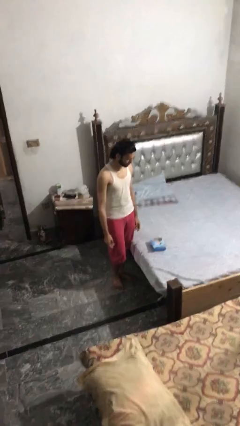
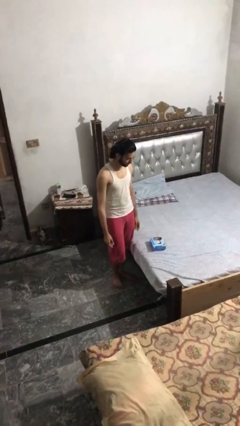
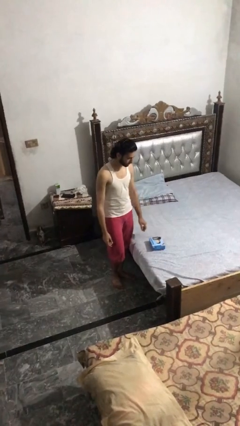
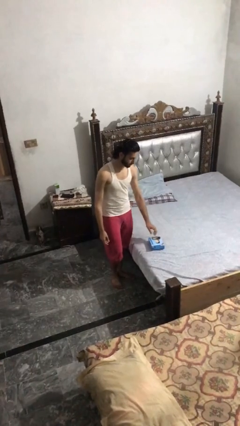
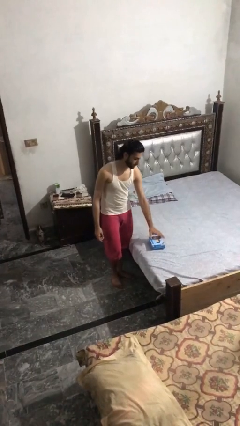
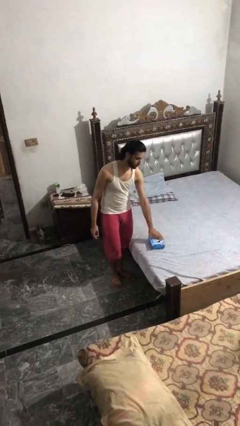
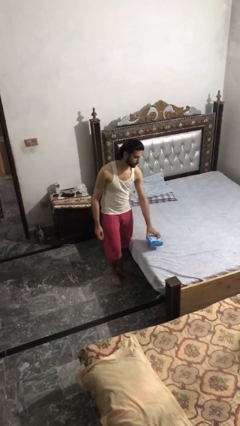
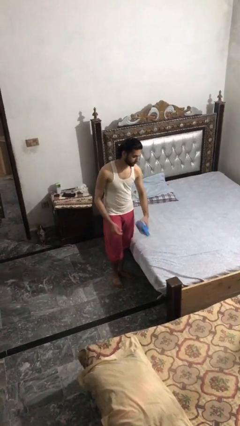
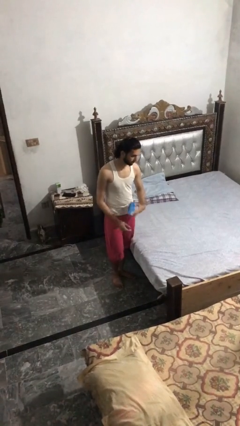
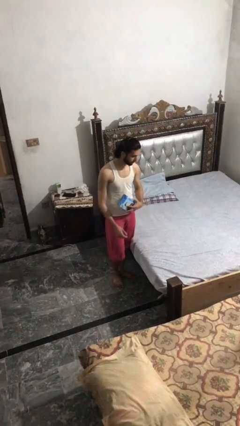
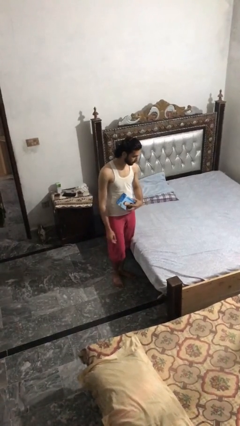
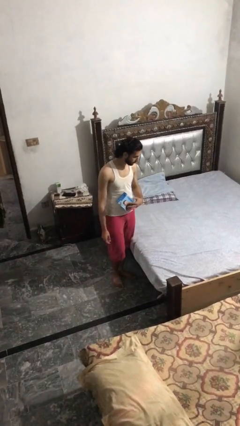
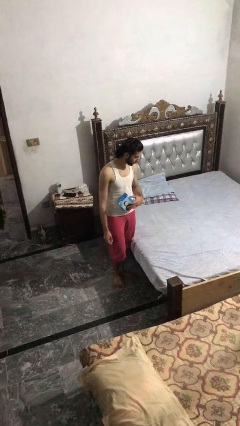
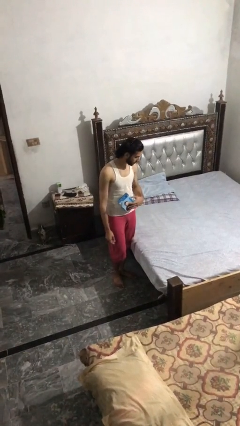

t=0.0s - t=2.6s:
person picks up object from bed

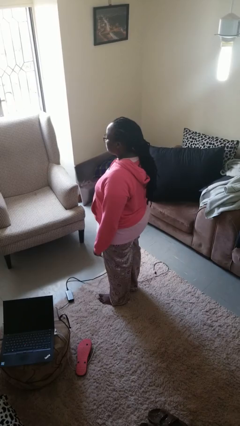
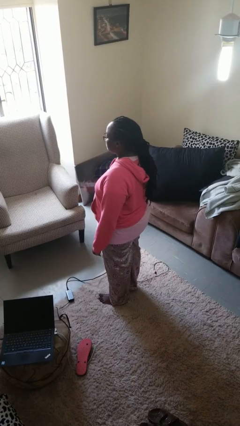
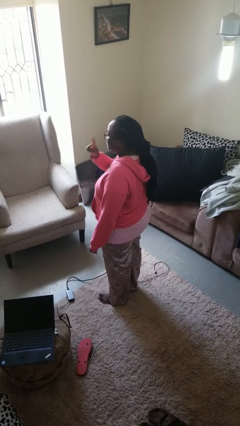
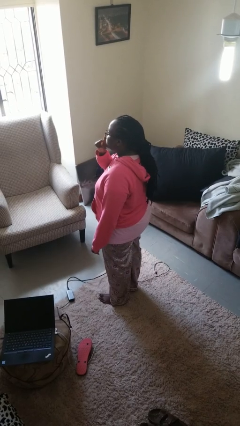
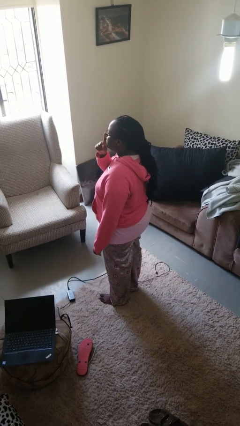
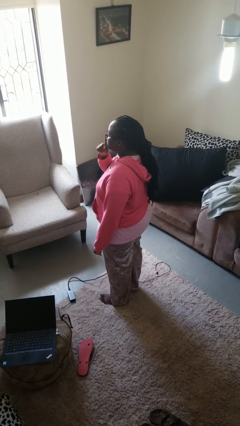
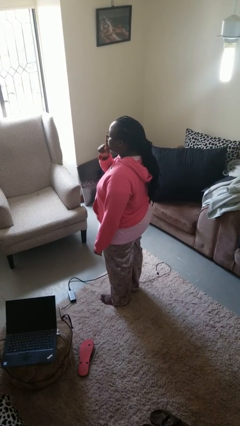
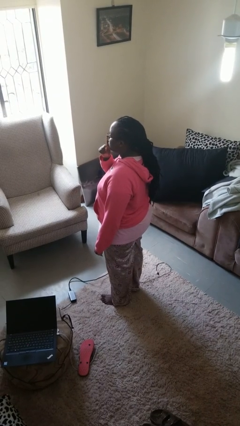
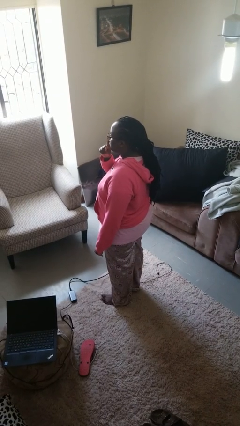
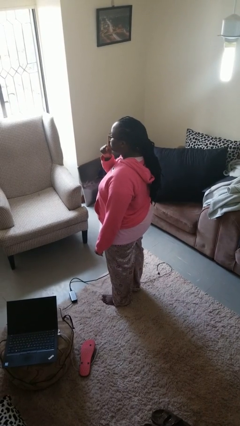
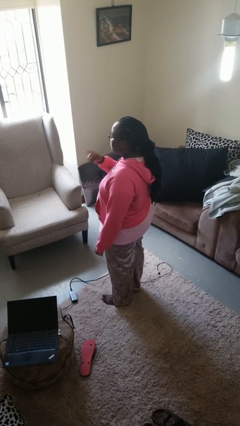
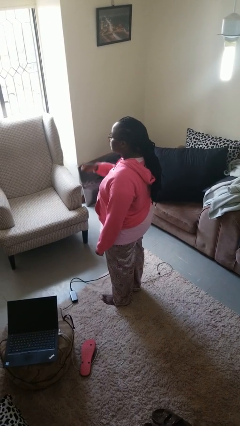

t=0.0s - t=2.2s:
person gestures be quiet

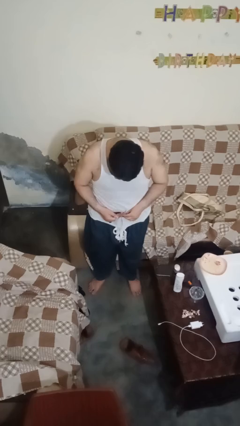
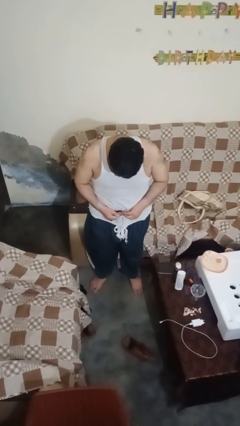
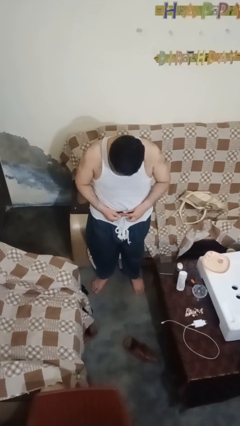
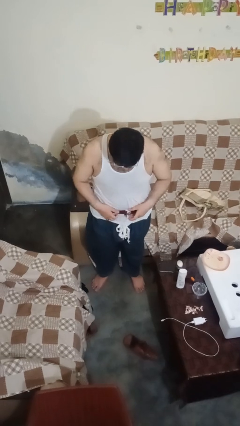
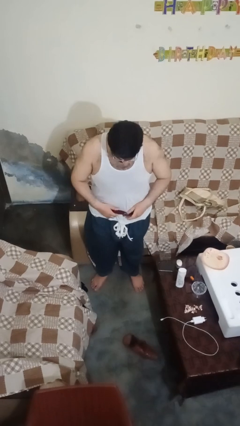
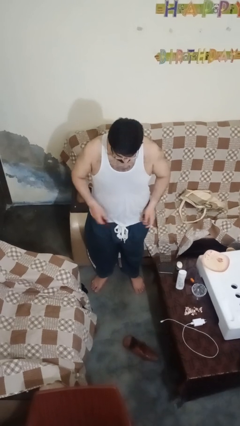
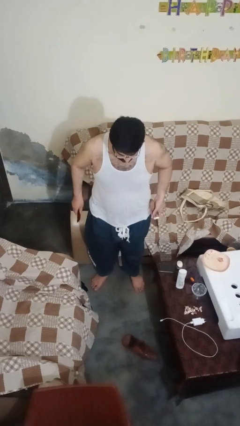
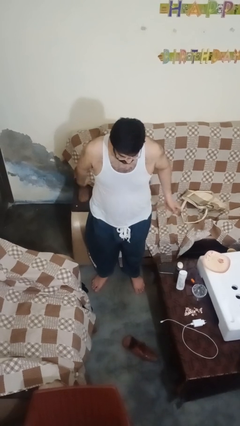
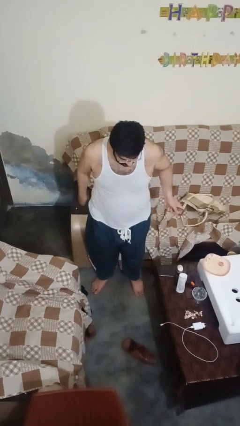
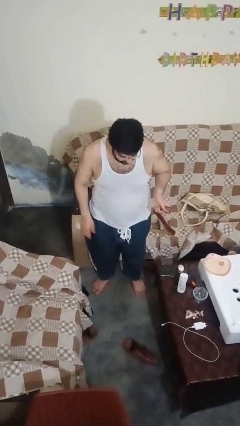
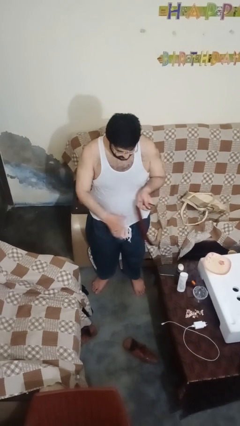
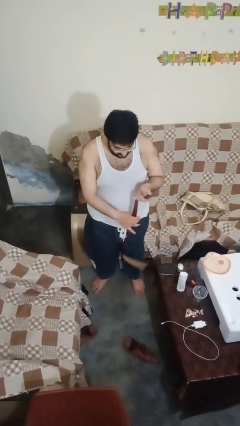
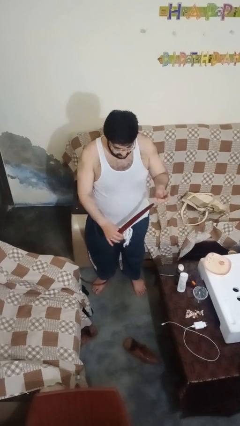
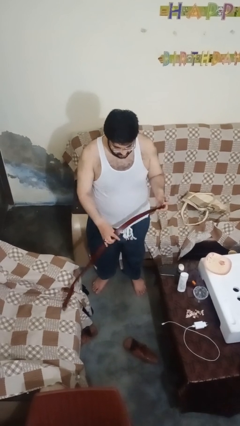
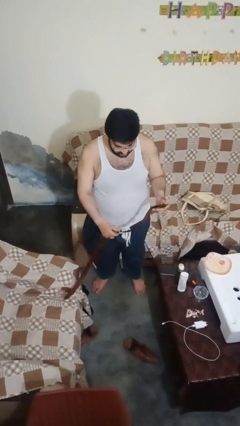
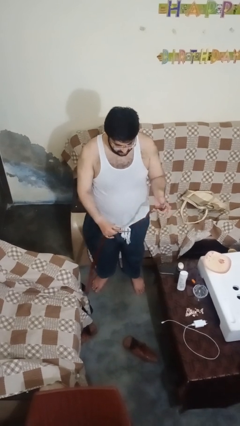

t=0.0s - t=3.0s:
person takes off belt

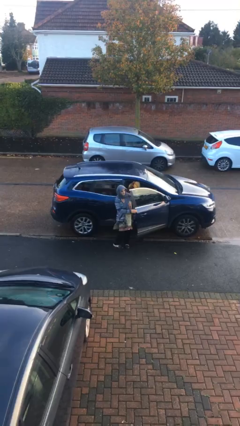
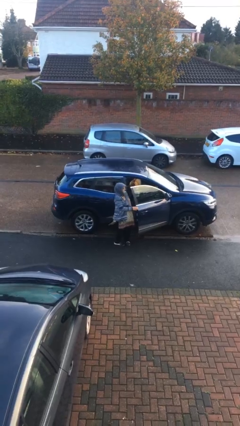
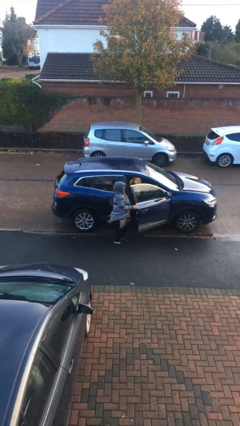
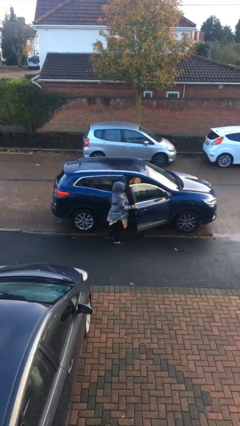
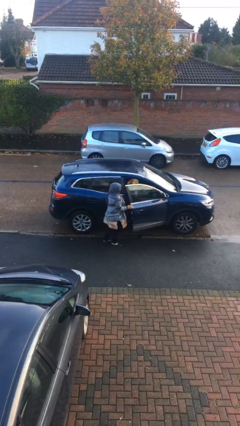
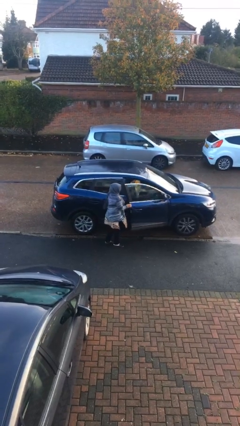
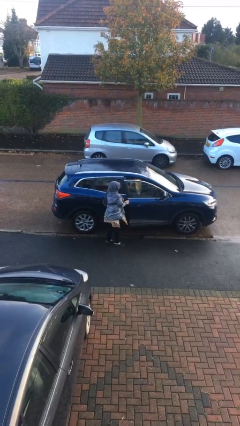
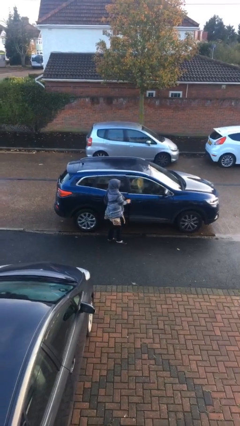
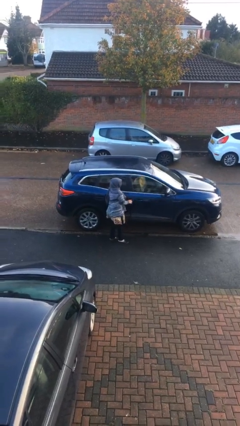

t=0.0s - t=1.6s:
person closes car door

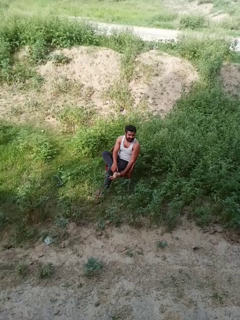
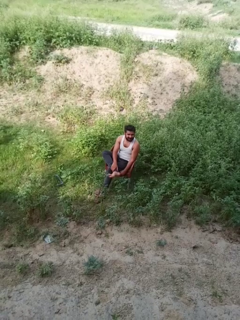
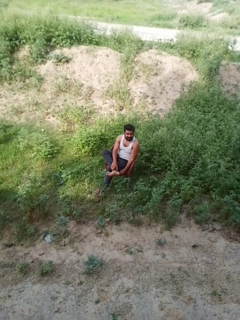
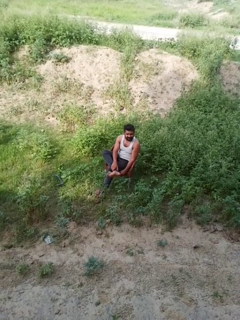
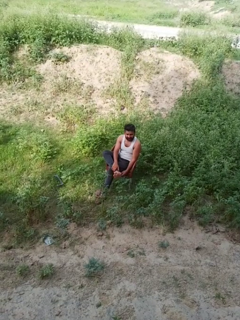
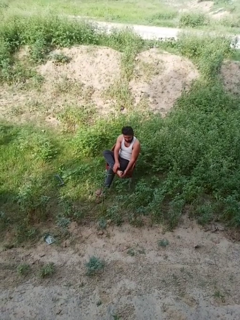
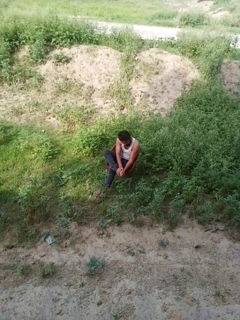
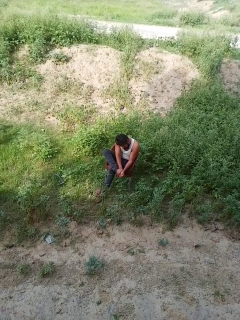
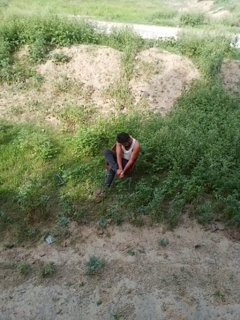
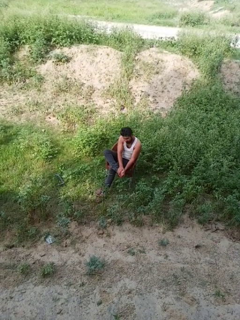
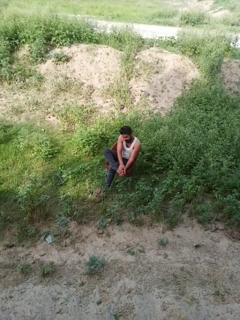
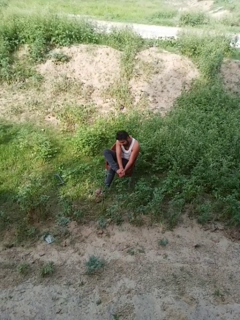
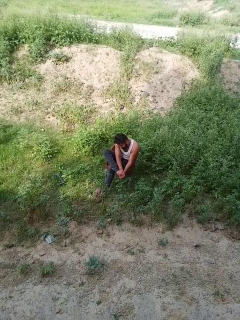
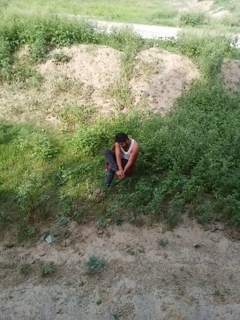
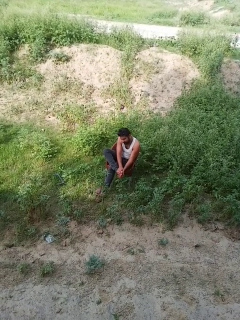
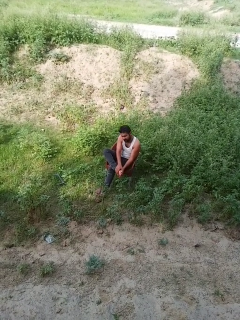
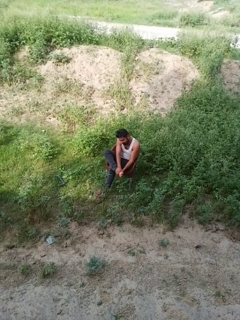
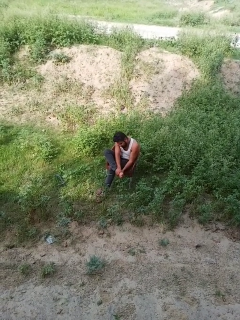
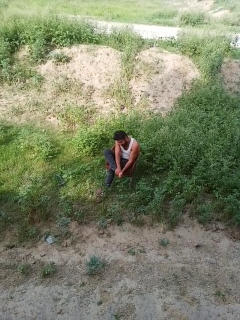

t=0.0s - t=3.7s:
person stubs toe

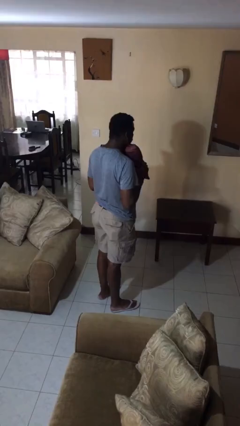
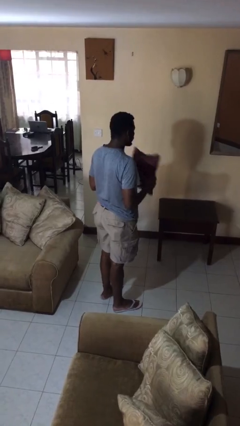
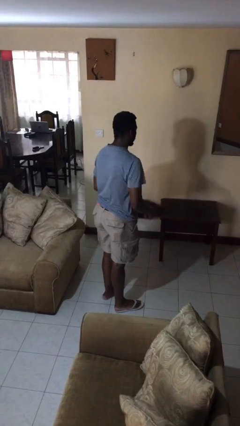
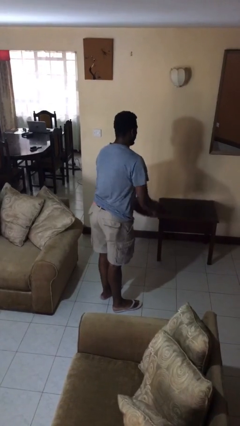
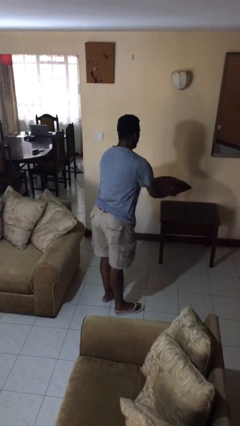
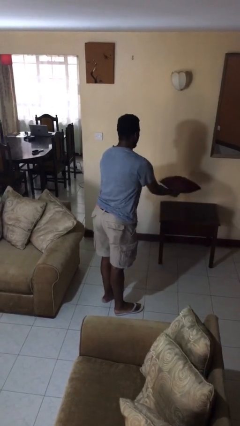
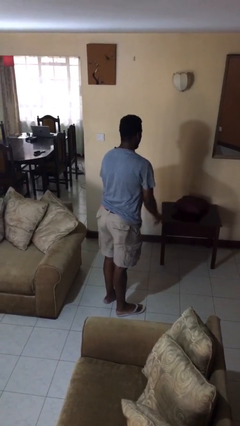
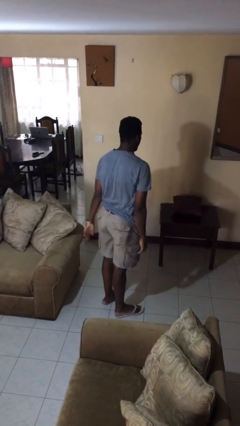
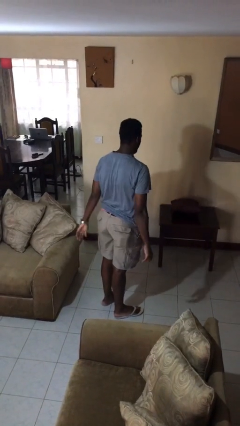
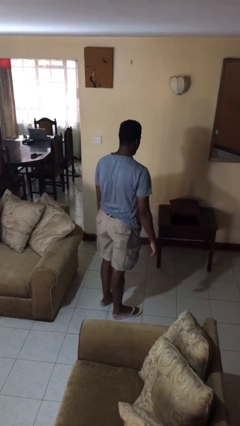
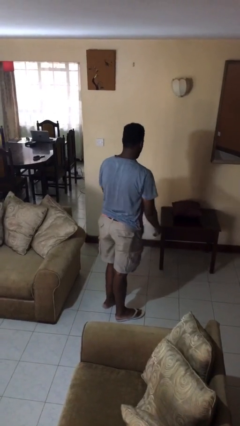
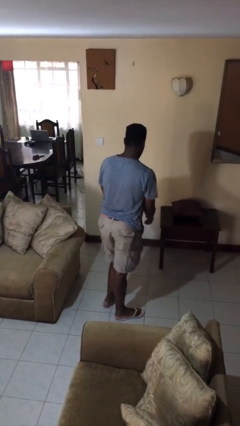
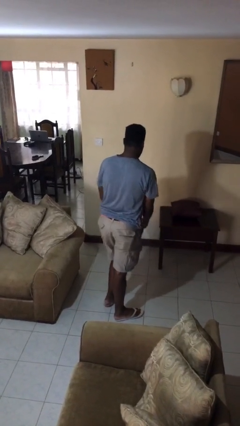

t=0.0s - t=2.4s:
person throws object on table

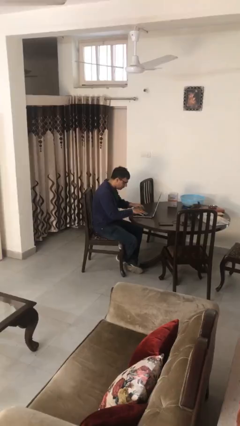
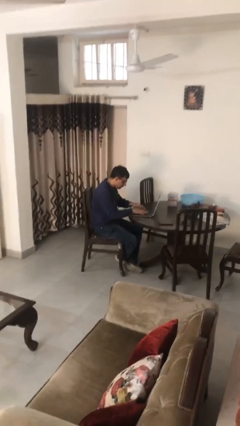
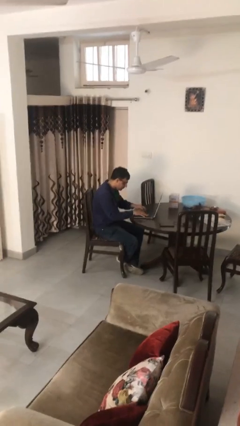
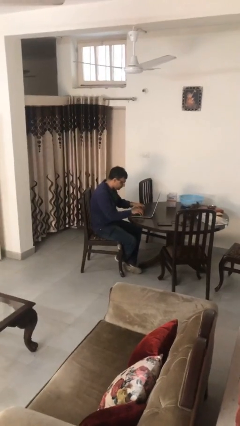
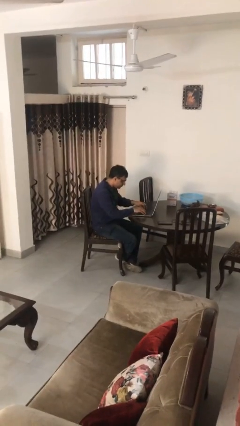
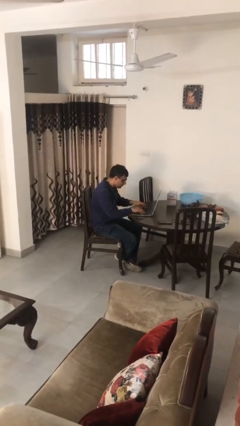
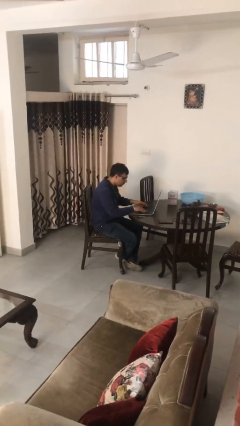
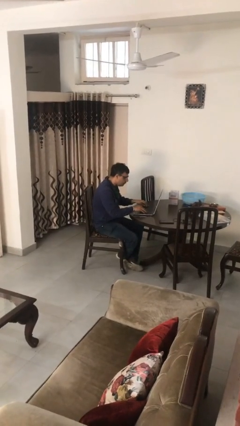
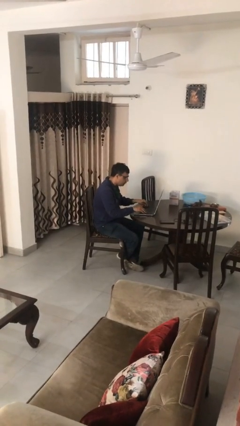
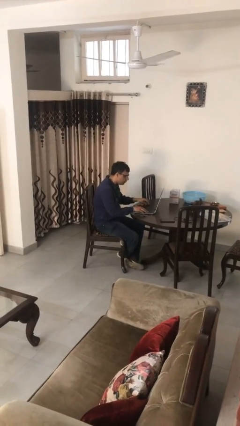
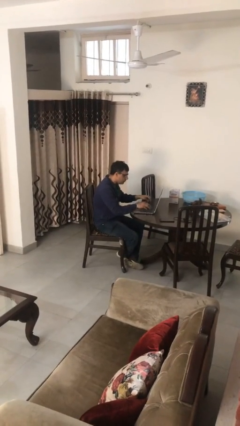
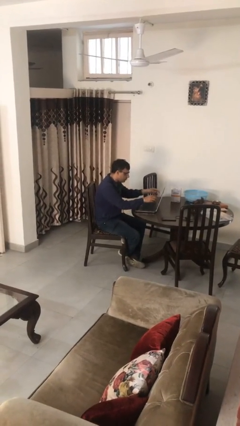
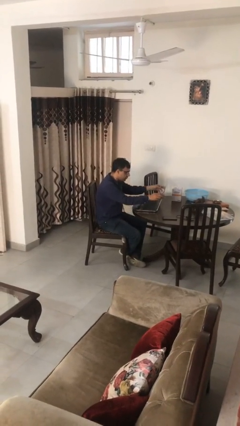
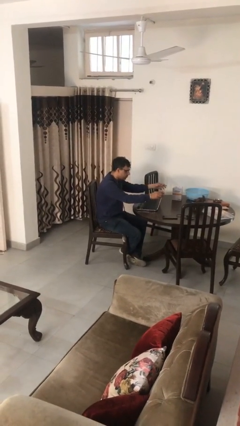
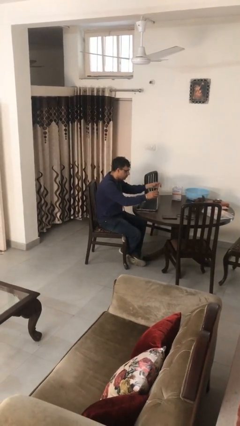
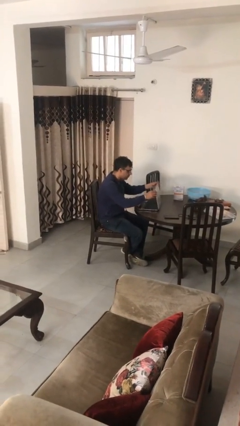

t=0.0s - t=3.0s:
person interacts with laptop
